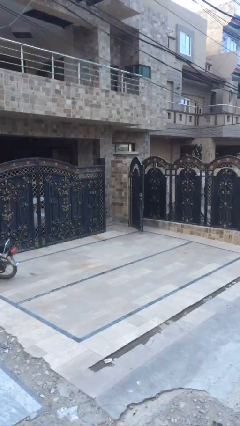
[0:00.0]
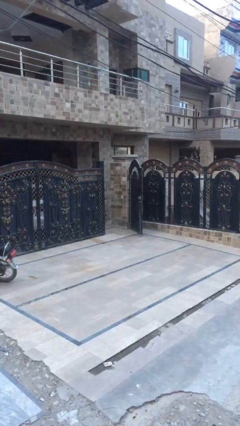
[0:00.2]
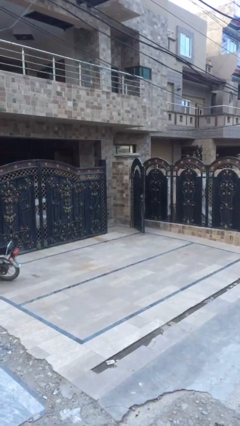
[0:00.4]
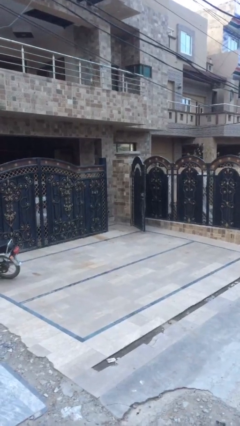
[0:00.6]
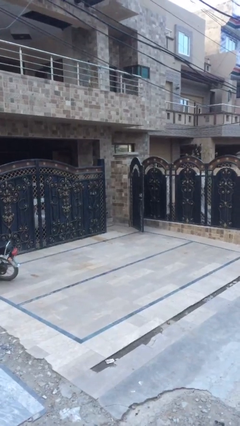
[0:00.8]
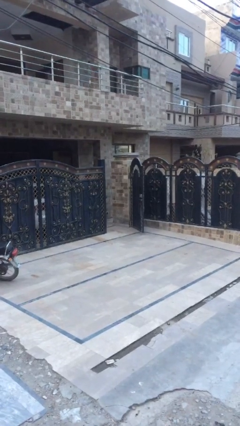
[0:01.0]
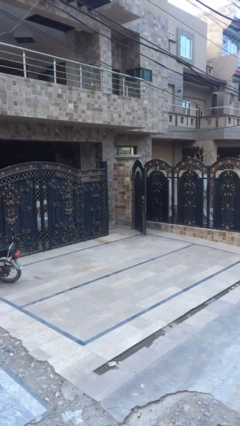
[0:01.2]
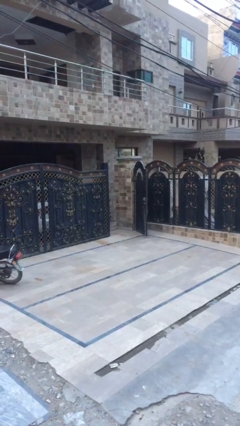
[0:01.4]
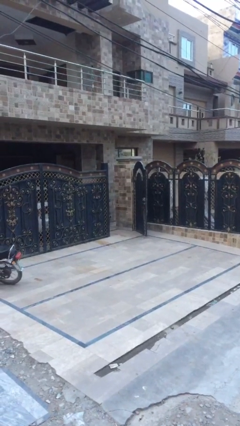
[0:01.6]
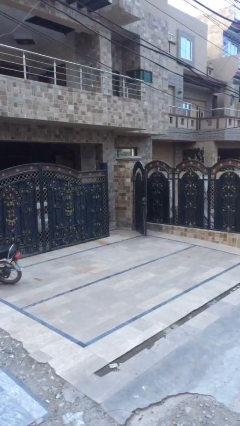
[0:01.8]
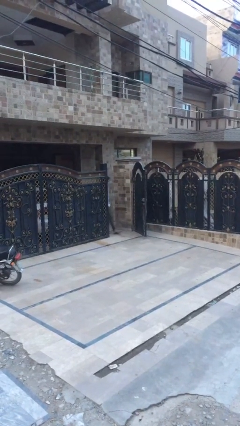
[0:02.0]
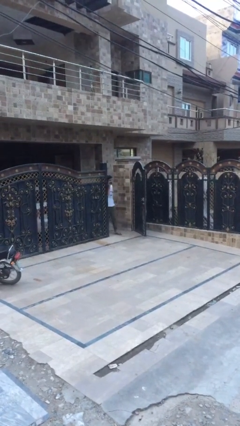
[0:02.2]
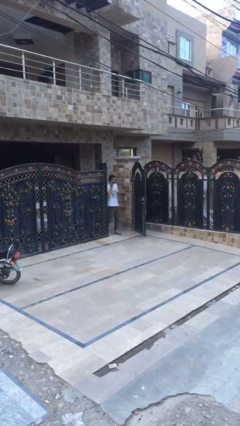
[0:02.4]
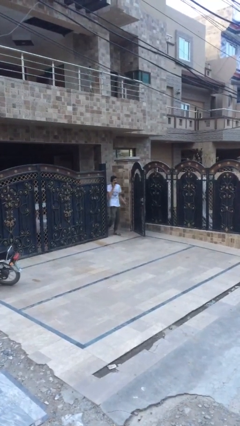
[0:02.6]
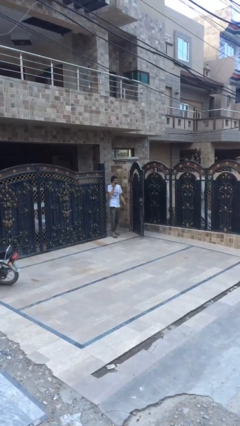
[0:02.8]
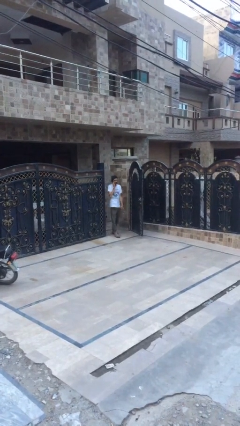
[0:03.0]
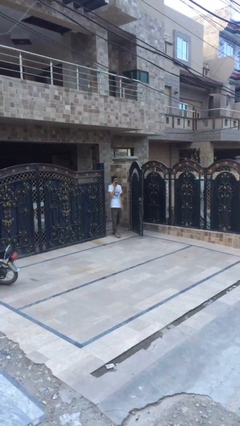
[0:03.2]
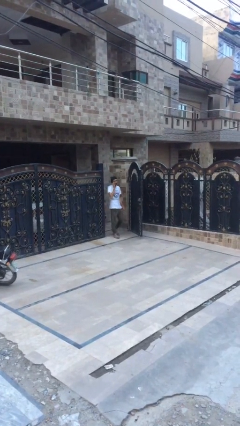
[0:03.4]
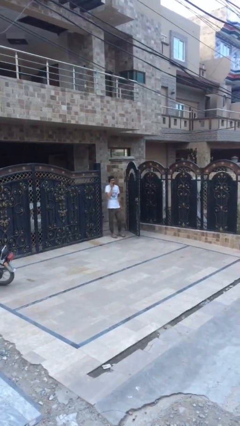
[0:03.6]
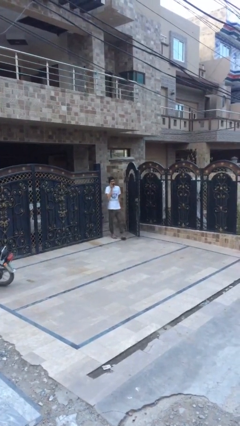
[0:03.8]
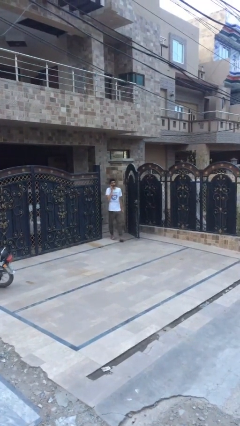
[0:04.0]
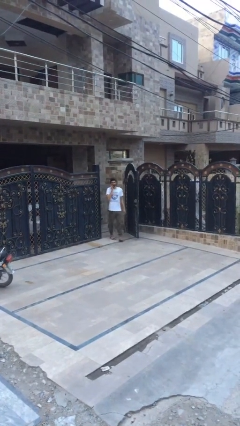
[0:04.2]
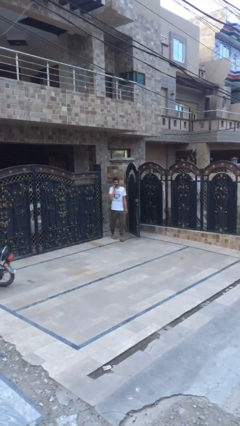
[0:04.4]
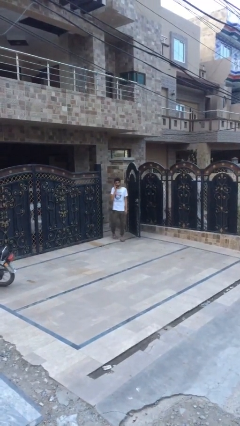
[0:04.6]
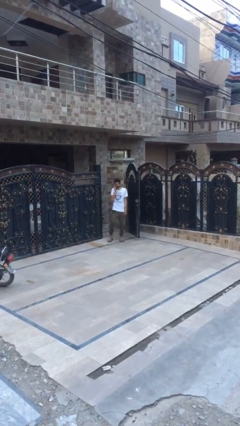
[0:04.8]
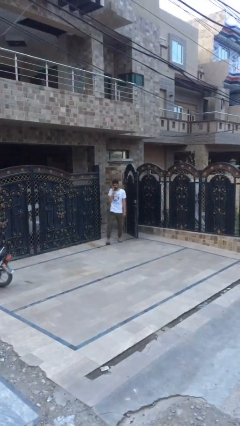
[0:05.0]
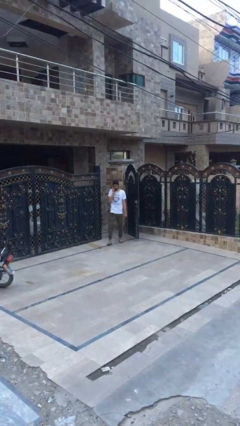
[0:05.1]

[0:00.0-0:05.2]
person enters scene through structure

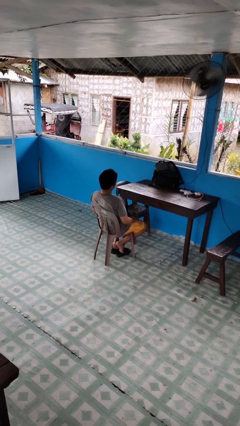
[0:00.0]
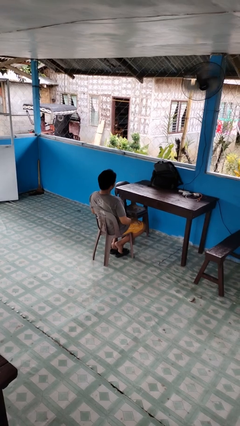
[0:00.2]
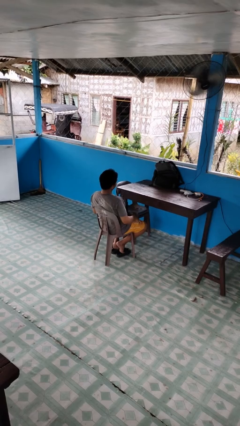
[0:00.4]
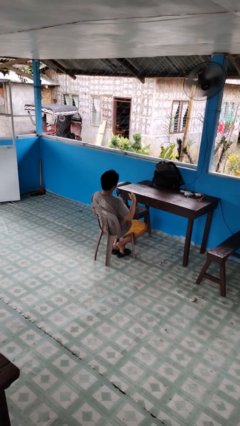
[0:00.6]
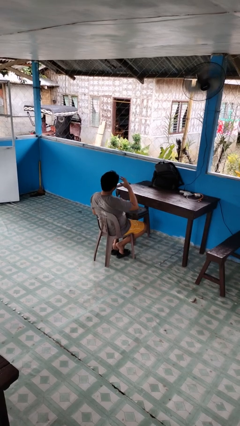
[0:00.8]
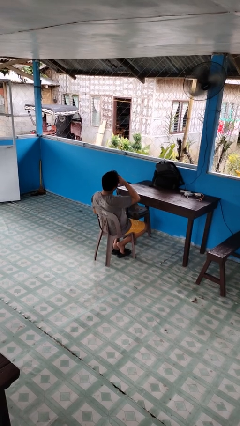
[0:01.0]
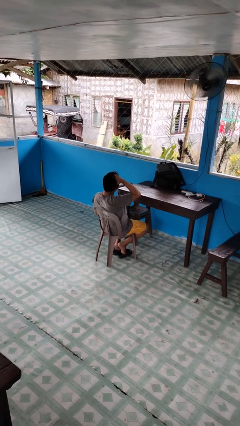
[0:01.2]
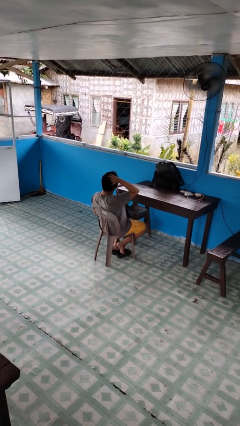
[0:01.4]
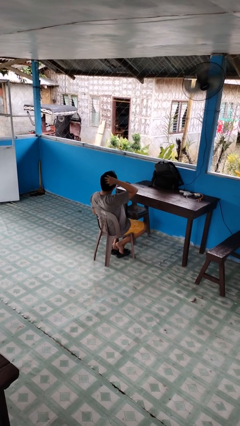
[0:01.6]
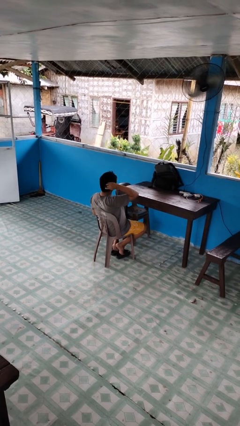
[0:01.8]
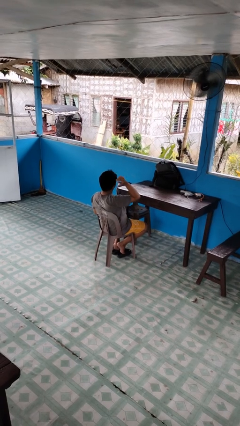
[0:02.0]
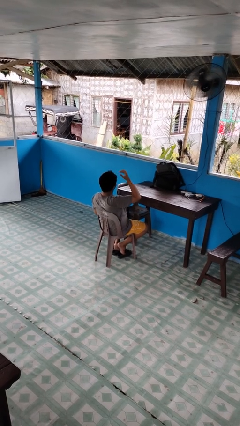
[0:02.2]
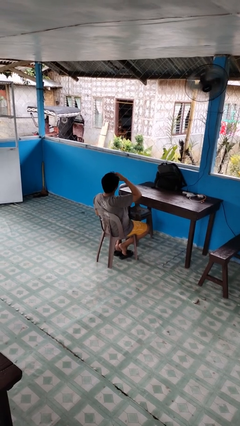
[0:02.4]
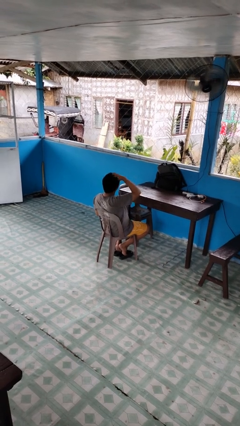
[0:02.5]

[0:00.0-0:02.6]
person strokes hair

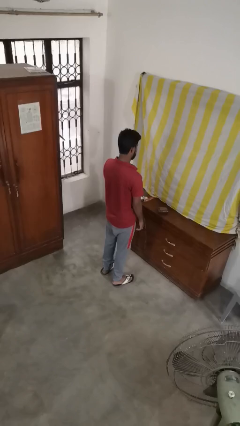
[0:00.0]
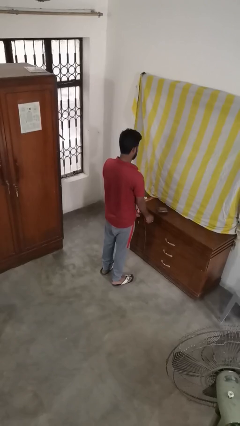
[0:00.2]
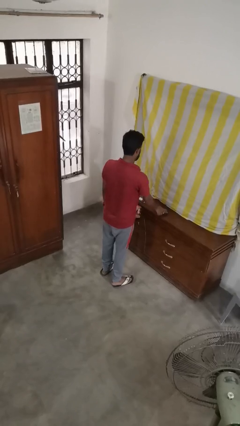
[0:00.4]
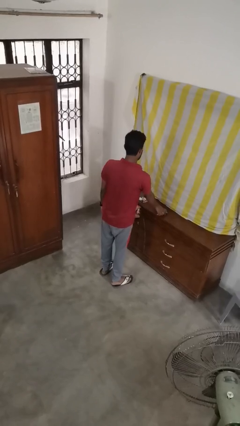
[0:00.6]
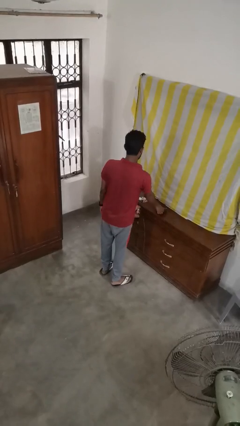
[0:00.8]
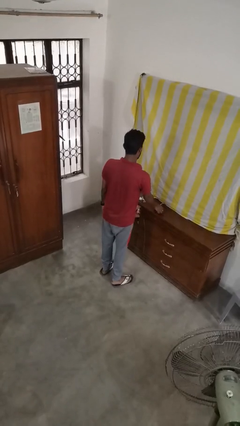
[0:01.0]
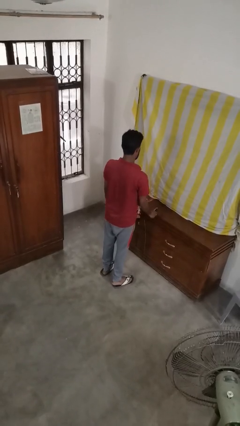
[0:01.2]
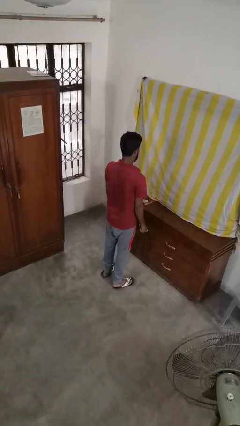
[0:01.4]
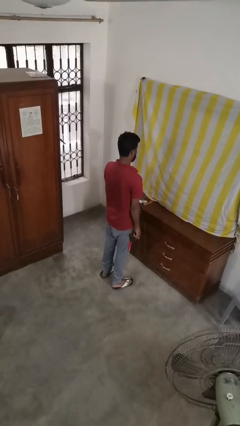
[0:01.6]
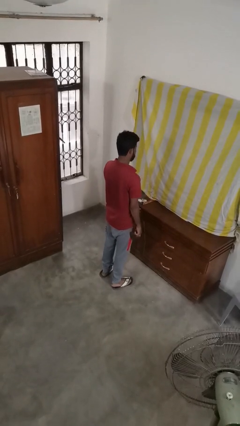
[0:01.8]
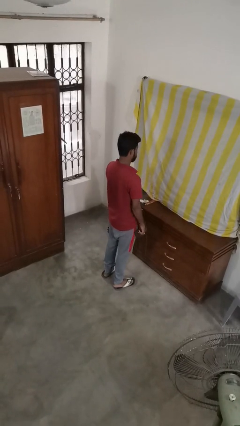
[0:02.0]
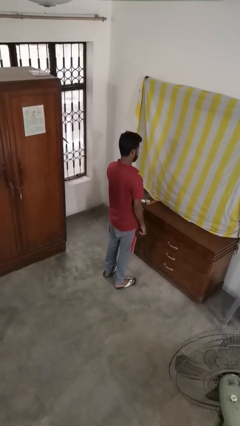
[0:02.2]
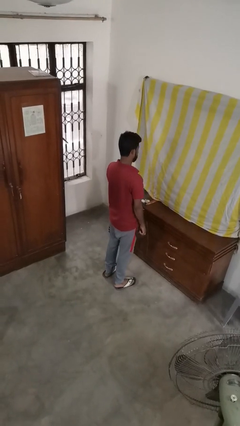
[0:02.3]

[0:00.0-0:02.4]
person picks up object from table

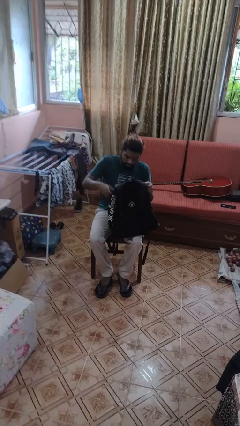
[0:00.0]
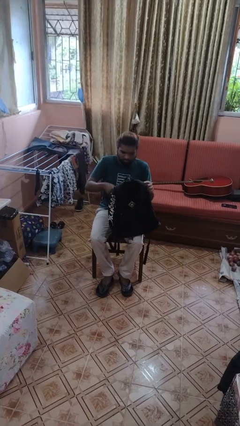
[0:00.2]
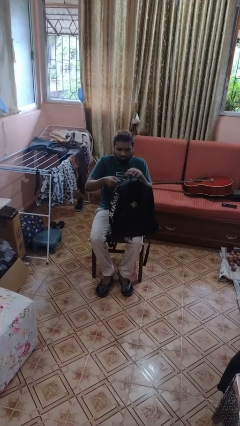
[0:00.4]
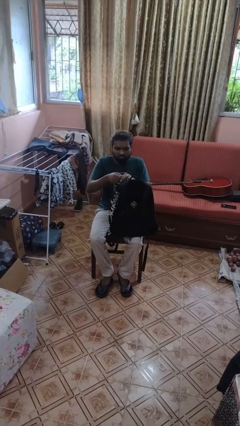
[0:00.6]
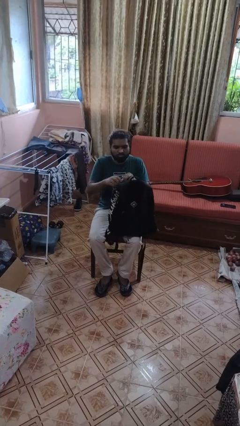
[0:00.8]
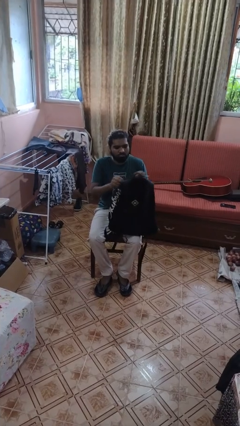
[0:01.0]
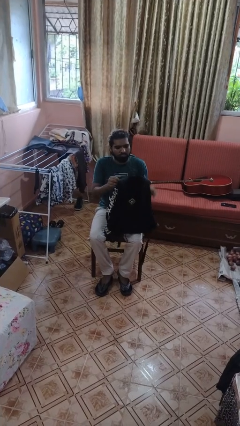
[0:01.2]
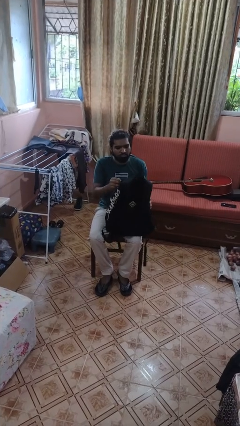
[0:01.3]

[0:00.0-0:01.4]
person puts object into backpack

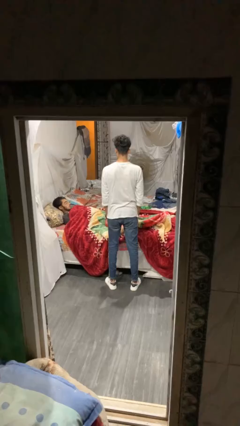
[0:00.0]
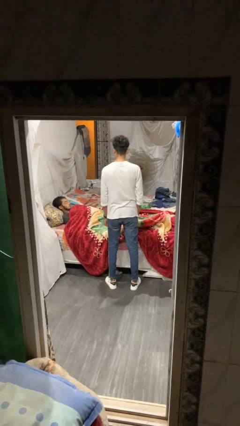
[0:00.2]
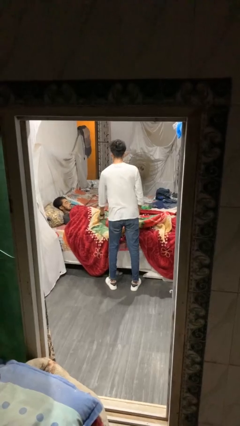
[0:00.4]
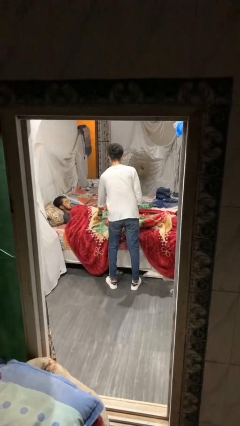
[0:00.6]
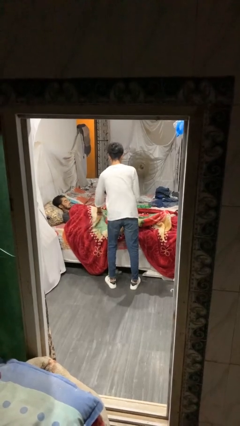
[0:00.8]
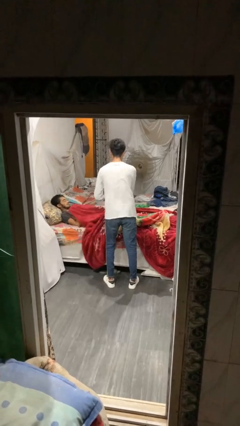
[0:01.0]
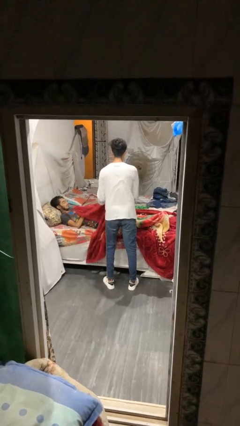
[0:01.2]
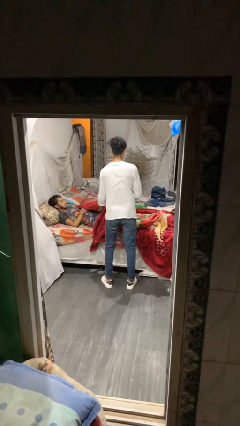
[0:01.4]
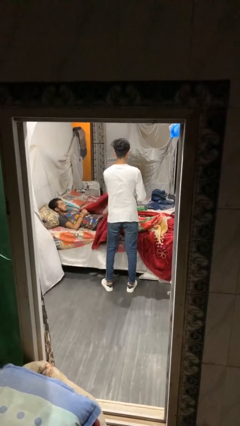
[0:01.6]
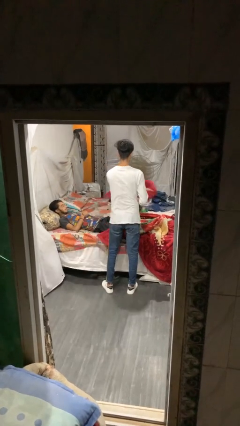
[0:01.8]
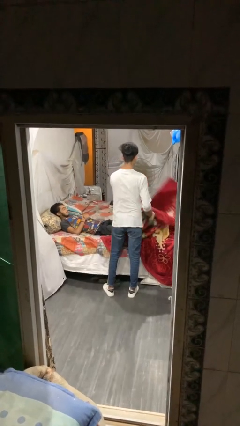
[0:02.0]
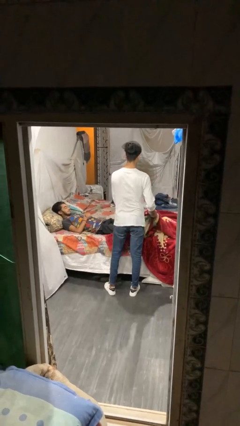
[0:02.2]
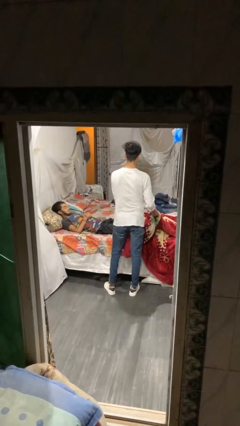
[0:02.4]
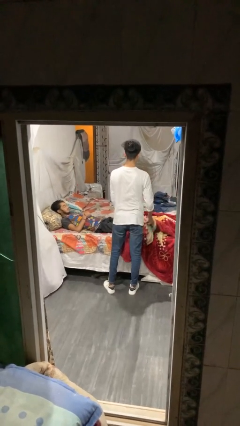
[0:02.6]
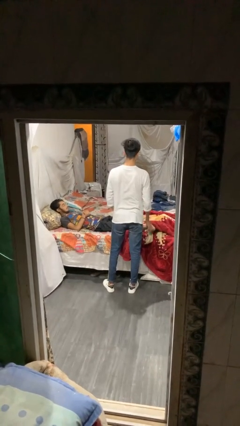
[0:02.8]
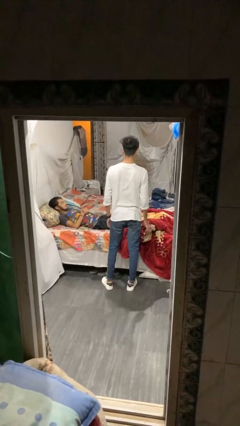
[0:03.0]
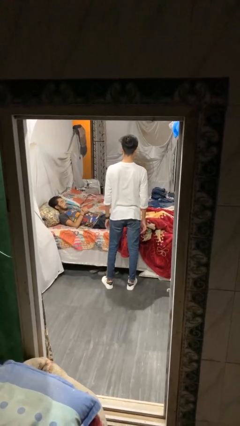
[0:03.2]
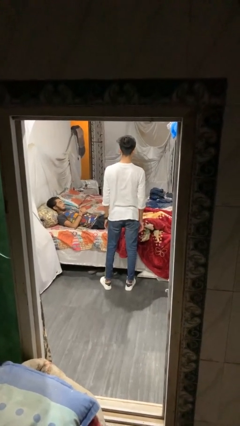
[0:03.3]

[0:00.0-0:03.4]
person uncovers friend with blanket

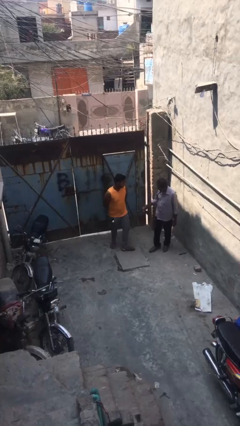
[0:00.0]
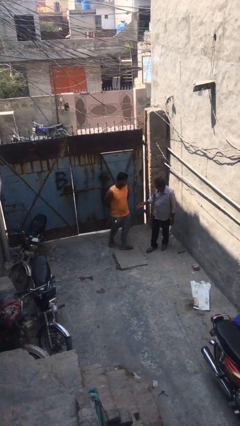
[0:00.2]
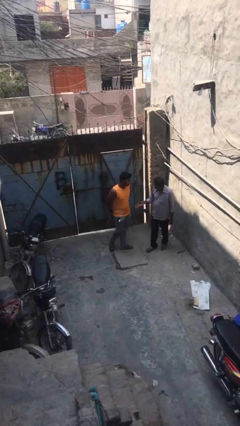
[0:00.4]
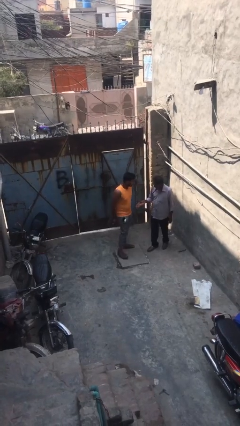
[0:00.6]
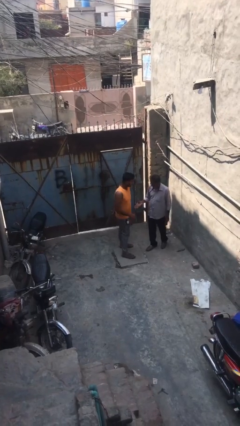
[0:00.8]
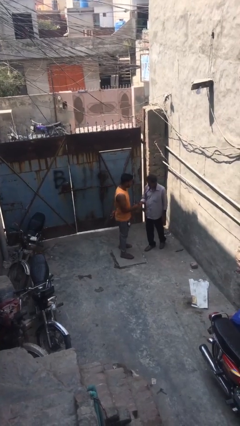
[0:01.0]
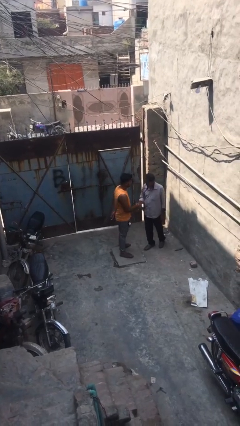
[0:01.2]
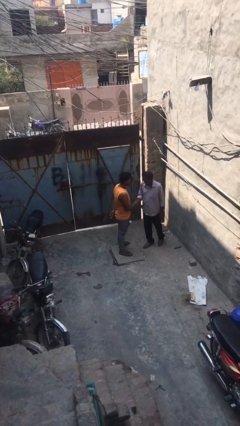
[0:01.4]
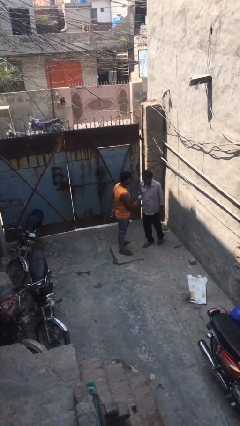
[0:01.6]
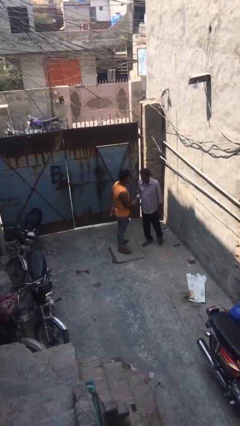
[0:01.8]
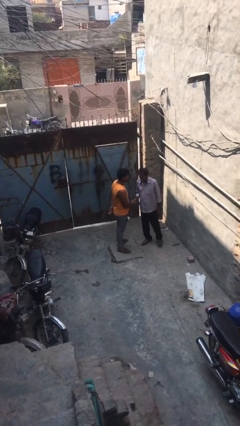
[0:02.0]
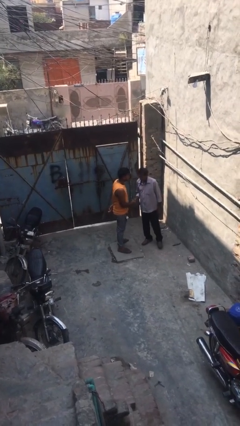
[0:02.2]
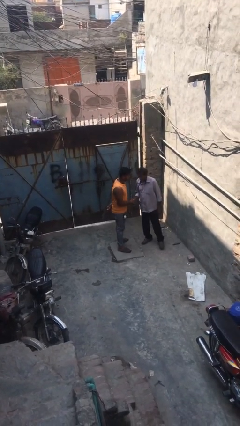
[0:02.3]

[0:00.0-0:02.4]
person shakes hand
